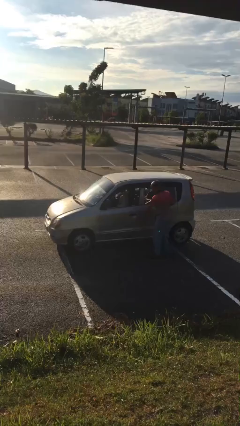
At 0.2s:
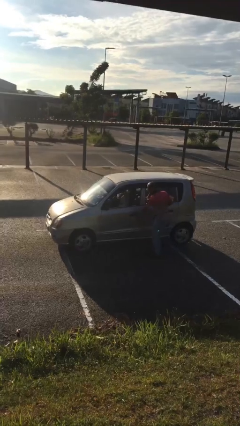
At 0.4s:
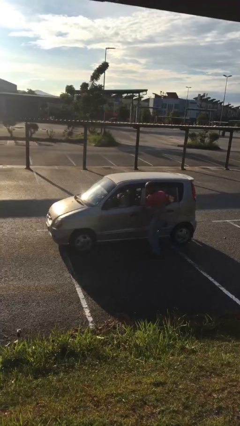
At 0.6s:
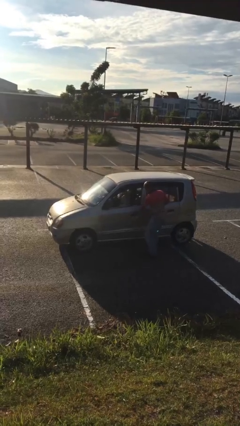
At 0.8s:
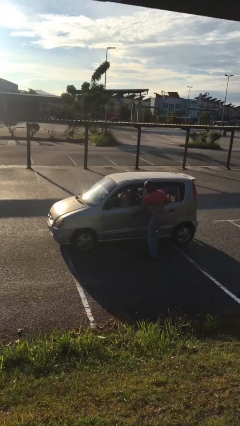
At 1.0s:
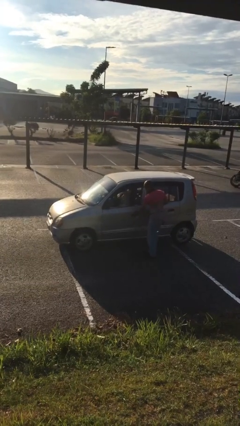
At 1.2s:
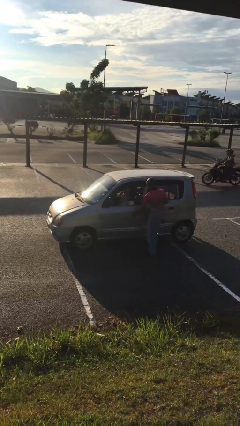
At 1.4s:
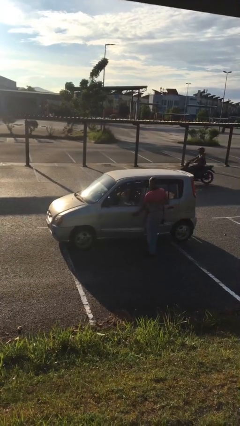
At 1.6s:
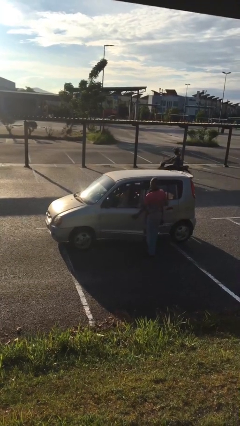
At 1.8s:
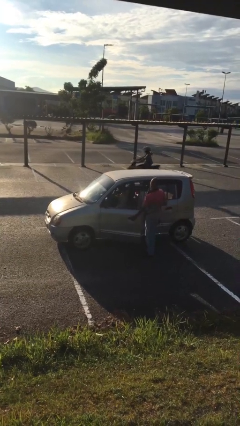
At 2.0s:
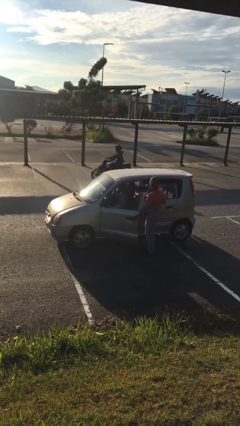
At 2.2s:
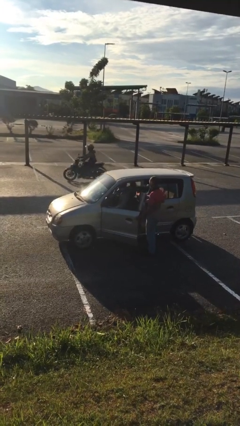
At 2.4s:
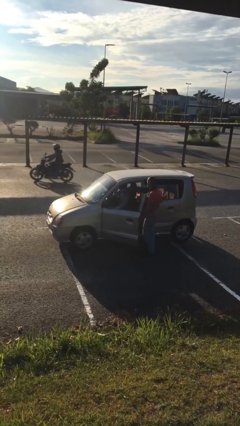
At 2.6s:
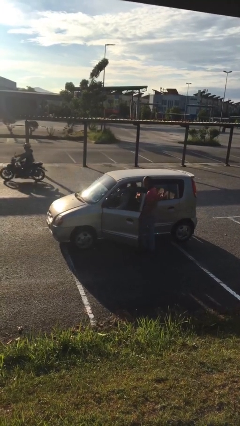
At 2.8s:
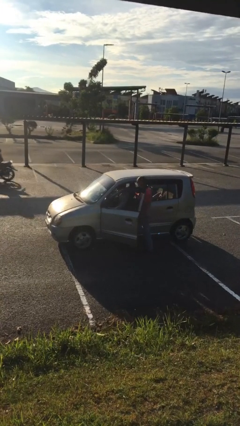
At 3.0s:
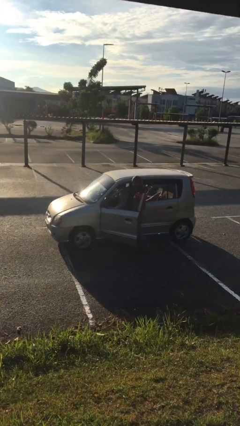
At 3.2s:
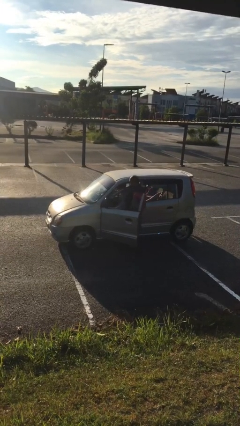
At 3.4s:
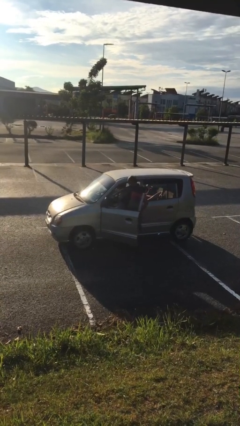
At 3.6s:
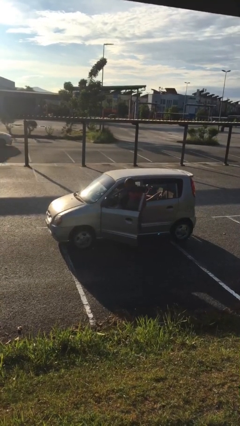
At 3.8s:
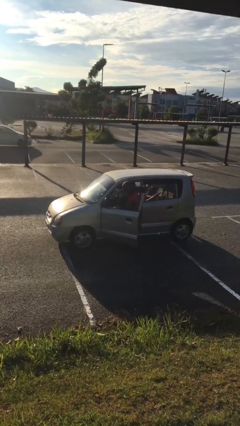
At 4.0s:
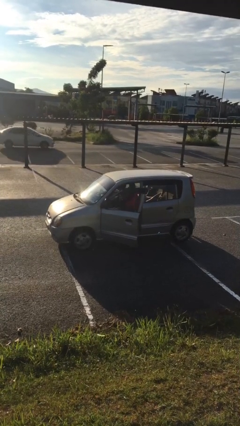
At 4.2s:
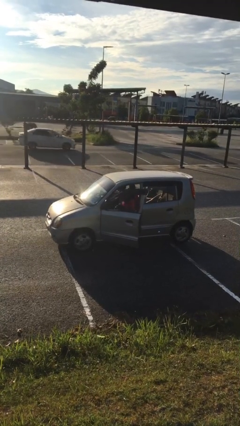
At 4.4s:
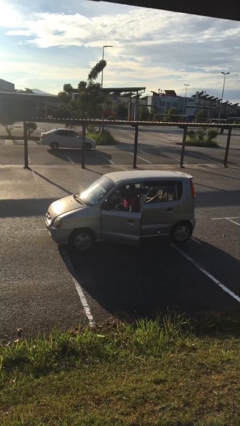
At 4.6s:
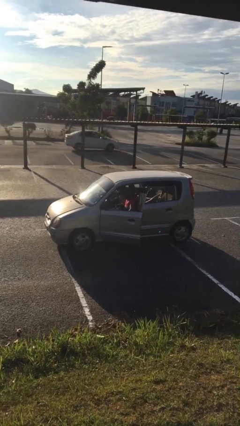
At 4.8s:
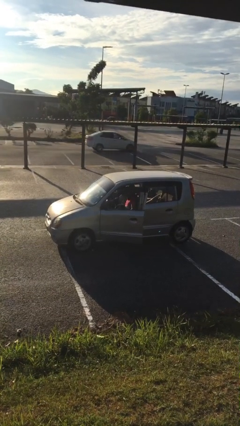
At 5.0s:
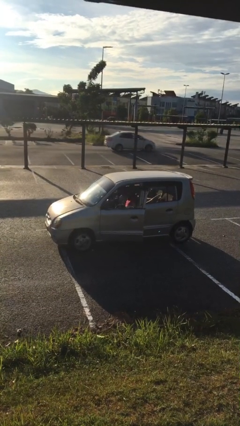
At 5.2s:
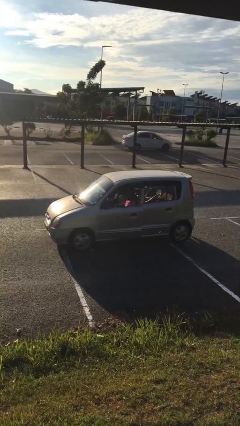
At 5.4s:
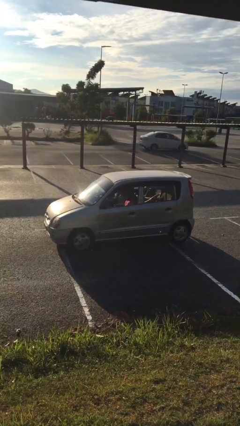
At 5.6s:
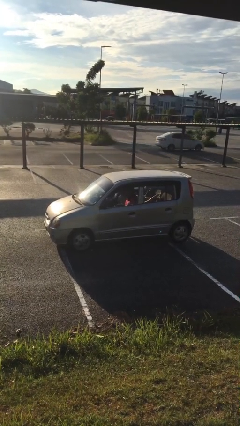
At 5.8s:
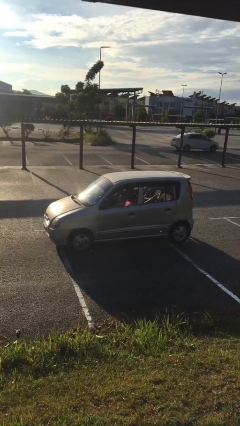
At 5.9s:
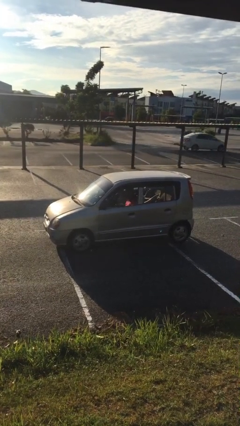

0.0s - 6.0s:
car picks up person

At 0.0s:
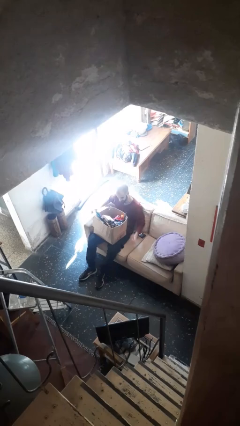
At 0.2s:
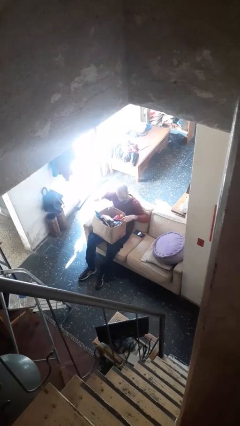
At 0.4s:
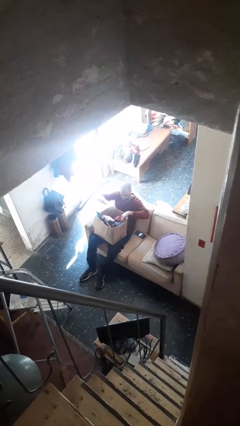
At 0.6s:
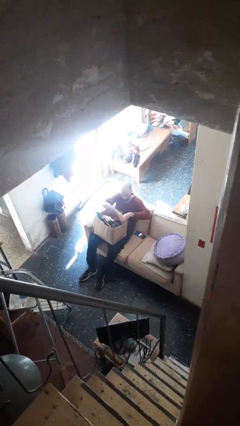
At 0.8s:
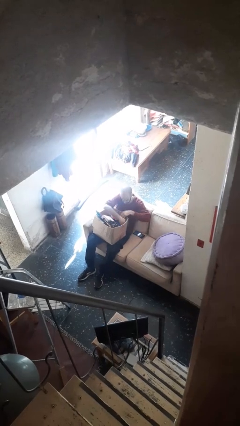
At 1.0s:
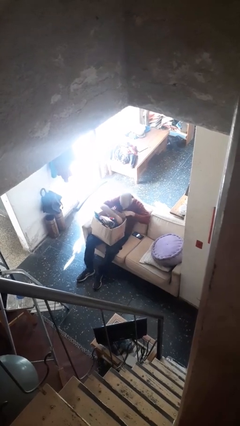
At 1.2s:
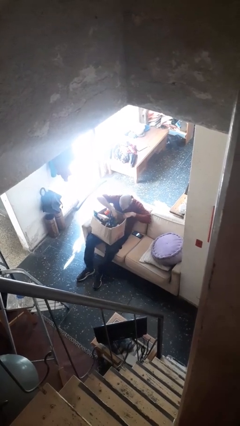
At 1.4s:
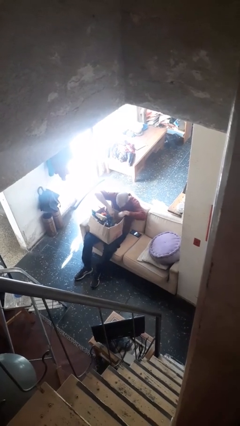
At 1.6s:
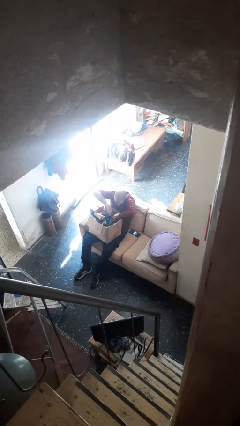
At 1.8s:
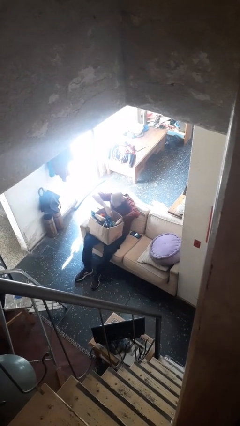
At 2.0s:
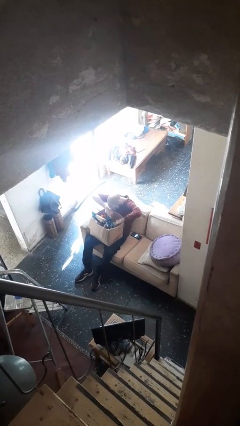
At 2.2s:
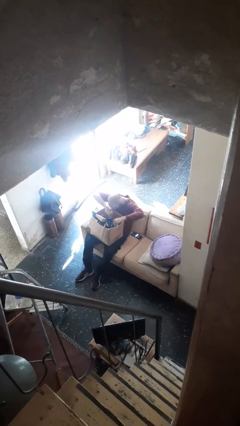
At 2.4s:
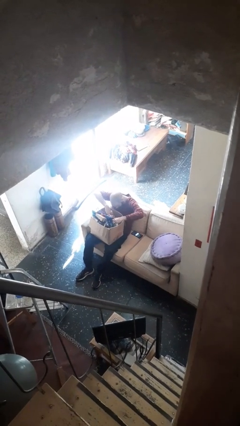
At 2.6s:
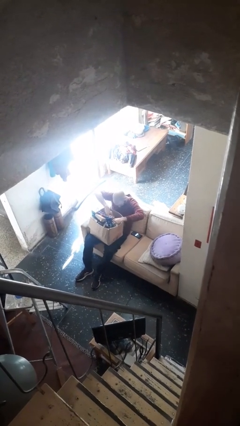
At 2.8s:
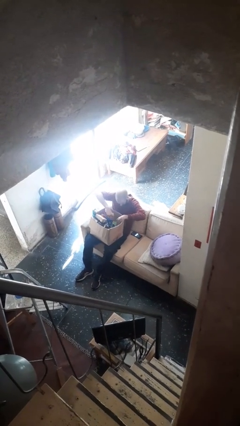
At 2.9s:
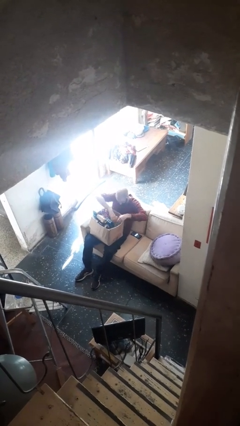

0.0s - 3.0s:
person searches in box

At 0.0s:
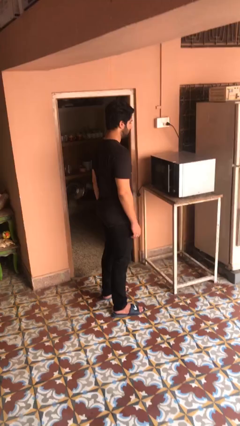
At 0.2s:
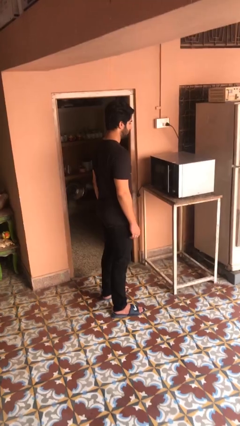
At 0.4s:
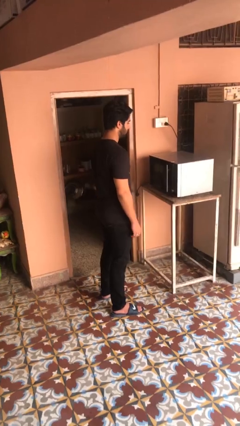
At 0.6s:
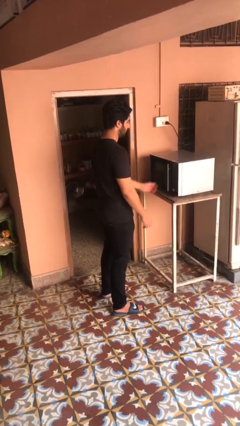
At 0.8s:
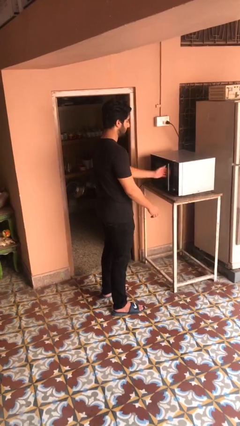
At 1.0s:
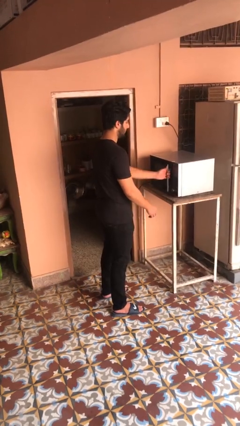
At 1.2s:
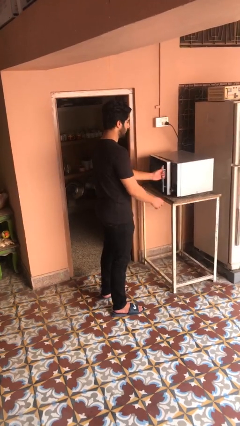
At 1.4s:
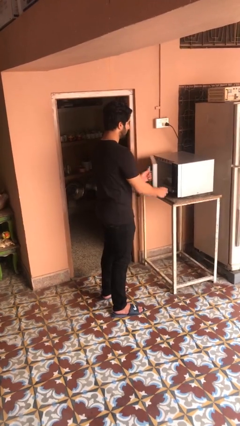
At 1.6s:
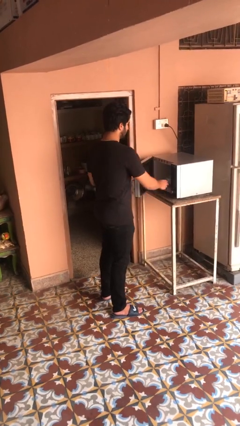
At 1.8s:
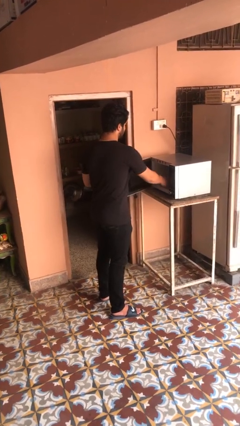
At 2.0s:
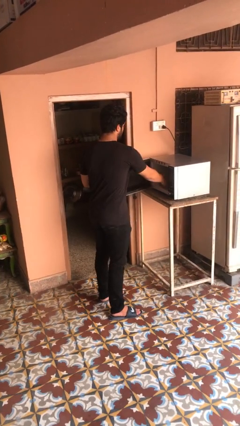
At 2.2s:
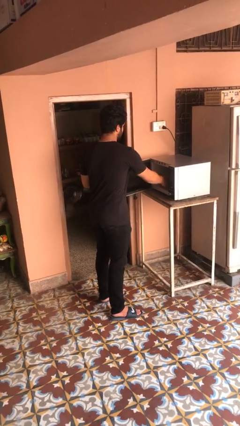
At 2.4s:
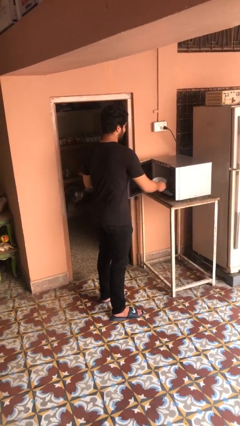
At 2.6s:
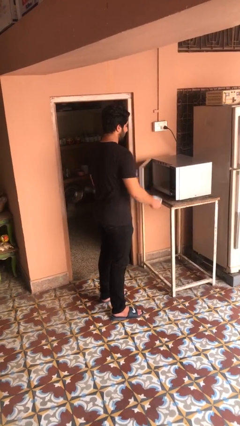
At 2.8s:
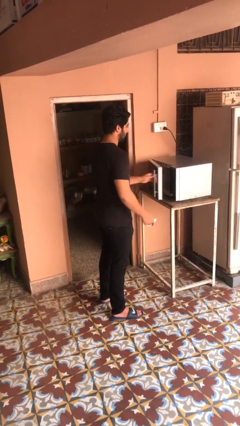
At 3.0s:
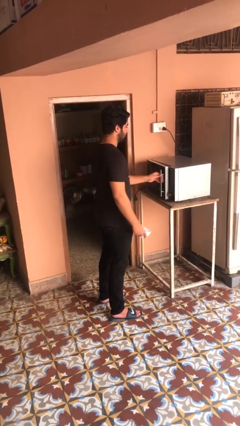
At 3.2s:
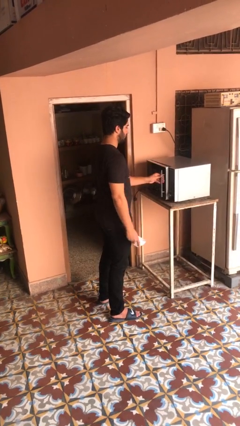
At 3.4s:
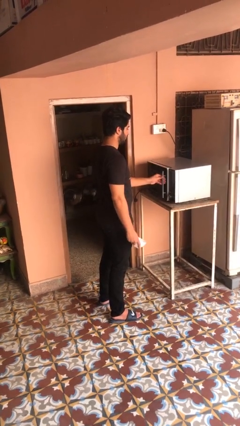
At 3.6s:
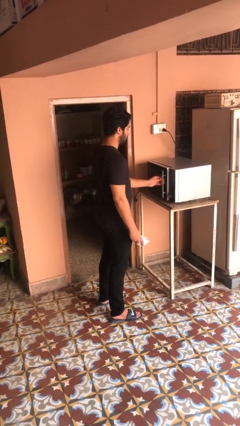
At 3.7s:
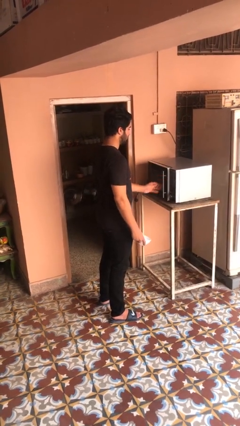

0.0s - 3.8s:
person takes object from microwave

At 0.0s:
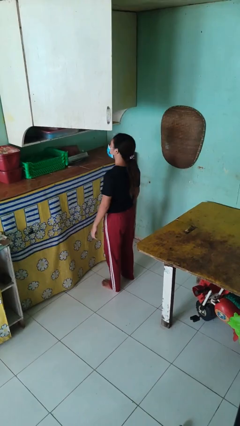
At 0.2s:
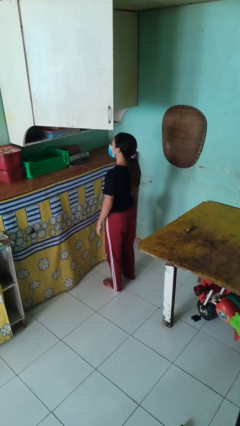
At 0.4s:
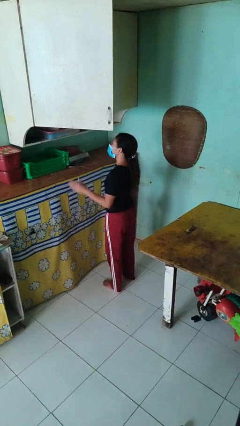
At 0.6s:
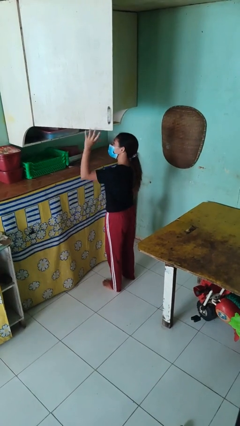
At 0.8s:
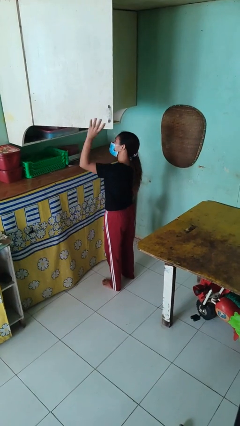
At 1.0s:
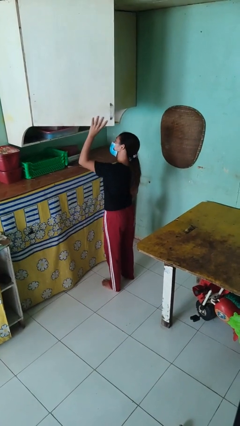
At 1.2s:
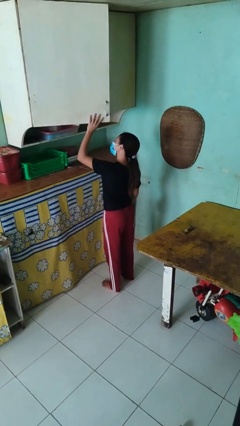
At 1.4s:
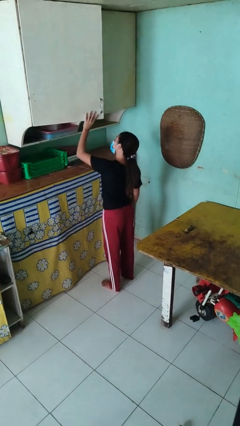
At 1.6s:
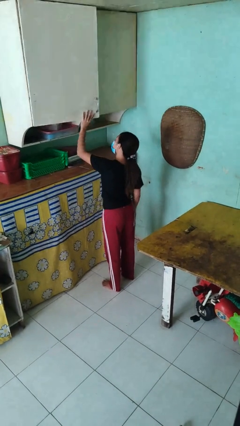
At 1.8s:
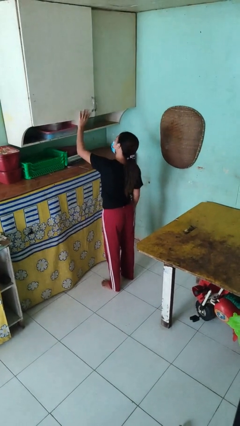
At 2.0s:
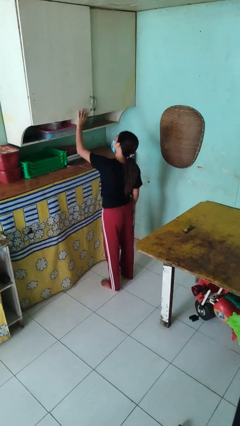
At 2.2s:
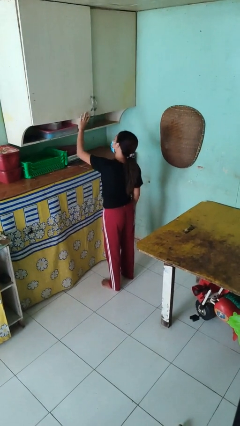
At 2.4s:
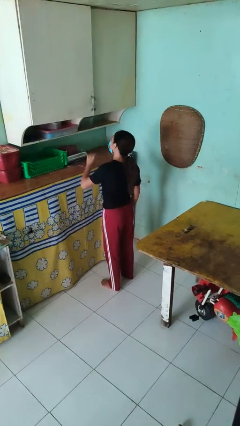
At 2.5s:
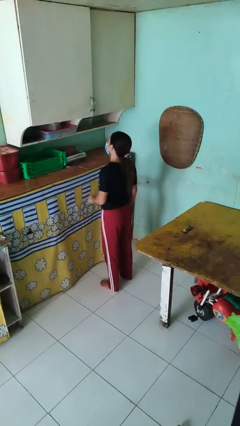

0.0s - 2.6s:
person closes cabinet

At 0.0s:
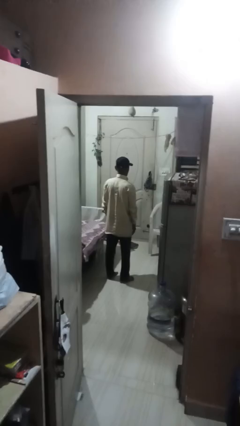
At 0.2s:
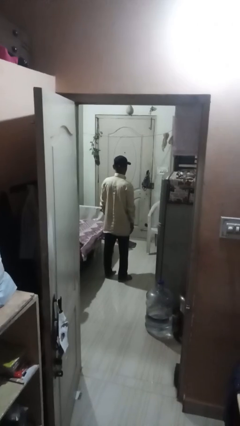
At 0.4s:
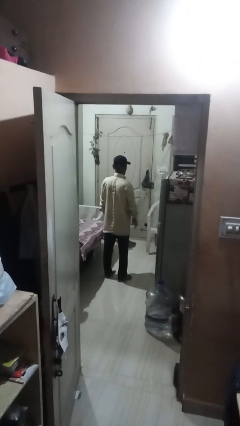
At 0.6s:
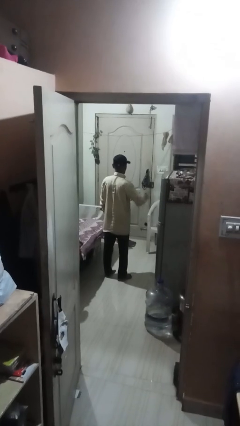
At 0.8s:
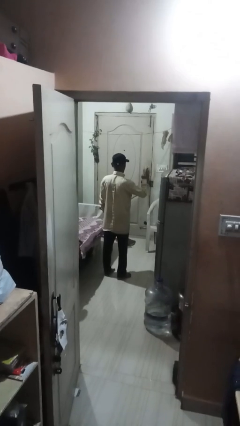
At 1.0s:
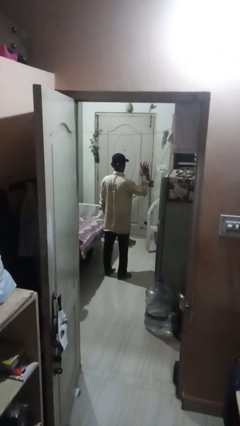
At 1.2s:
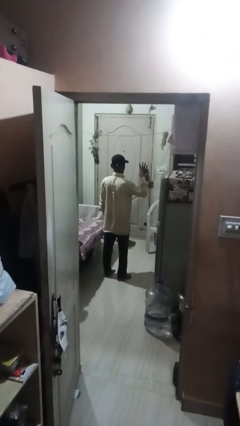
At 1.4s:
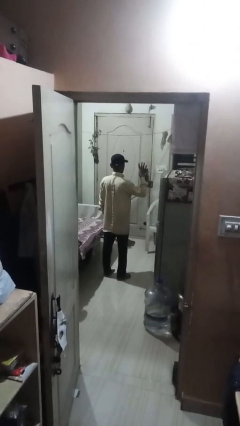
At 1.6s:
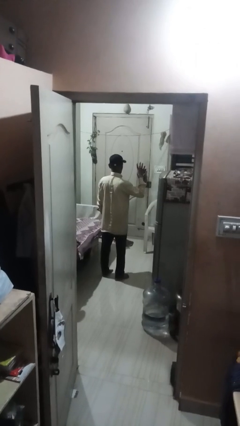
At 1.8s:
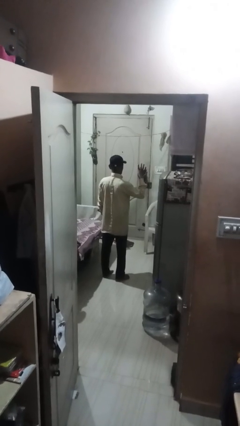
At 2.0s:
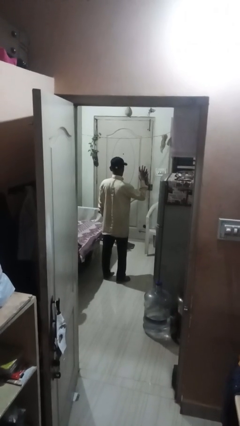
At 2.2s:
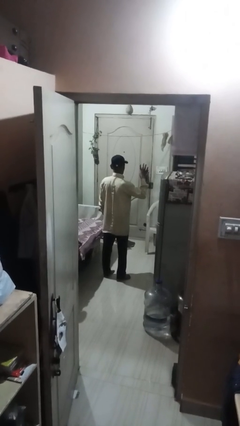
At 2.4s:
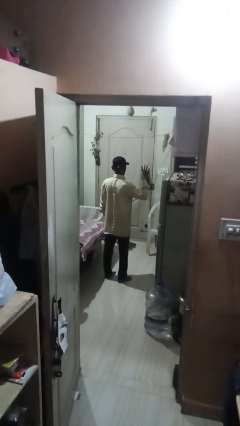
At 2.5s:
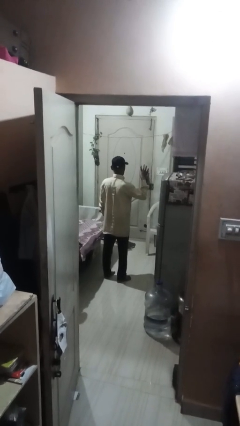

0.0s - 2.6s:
person gestures number four

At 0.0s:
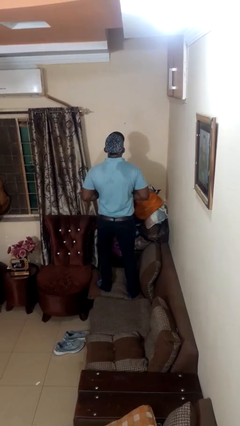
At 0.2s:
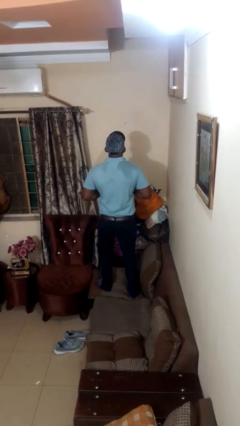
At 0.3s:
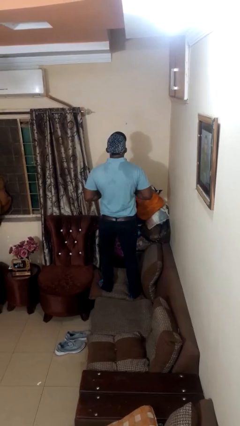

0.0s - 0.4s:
person jumps on couch
